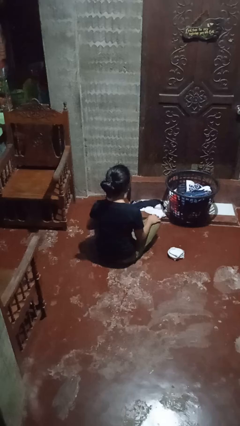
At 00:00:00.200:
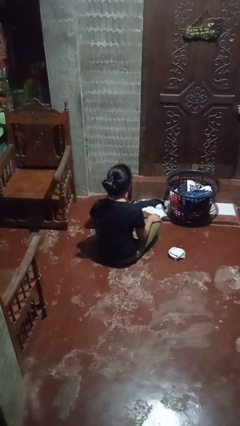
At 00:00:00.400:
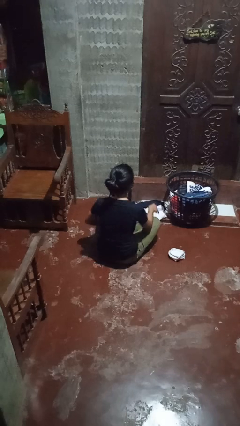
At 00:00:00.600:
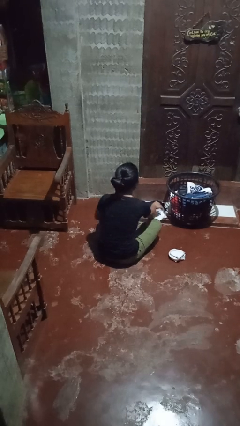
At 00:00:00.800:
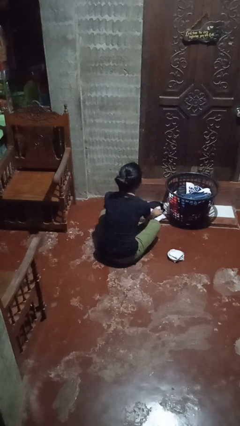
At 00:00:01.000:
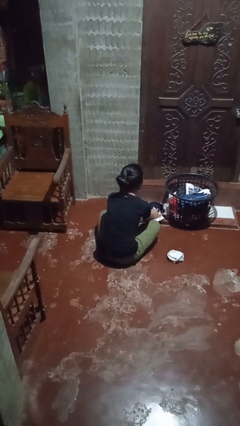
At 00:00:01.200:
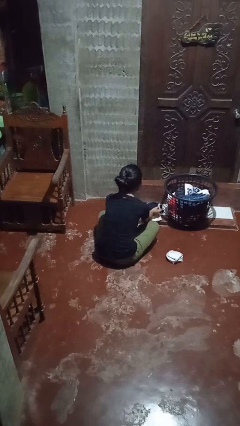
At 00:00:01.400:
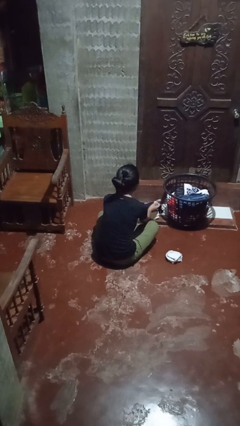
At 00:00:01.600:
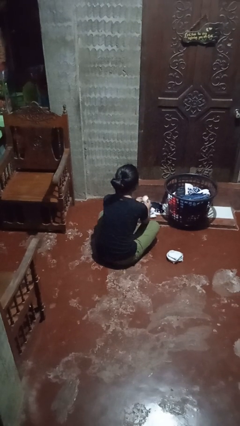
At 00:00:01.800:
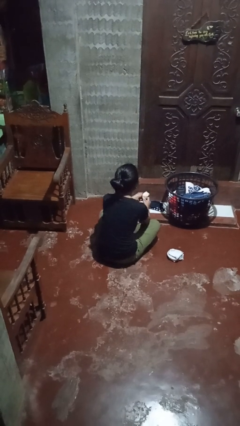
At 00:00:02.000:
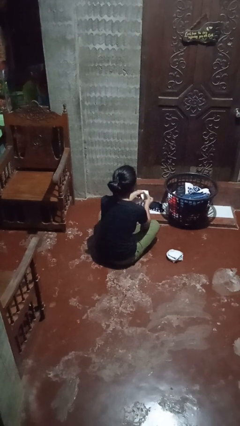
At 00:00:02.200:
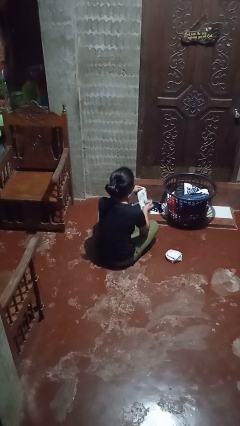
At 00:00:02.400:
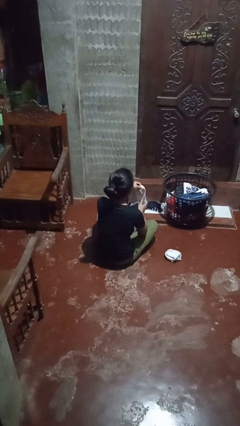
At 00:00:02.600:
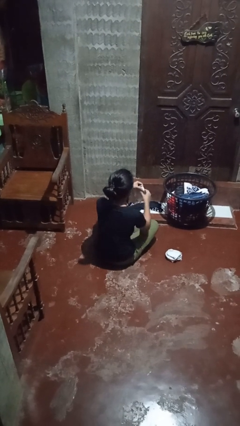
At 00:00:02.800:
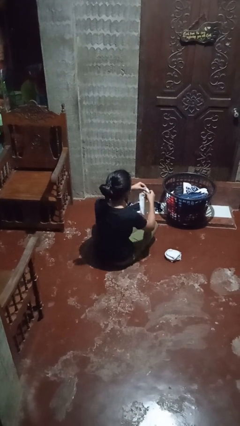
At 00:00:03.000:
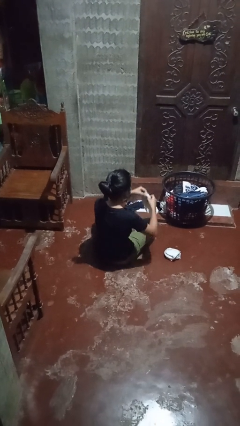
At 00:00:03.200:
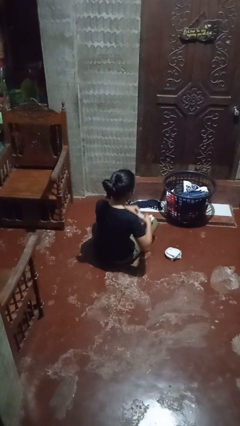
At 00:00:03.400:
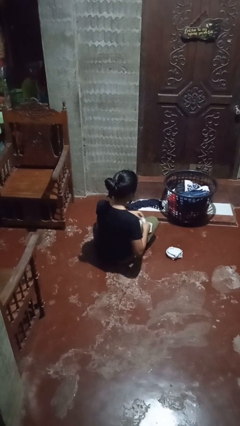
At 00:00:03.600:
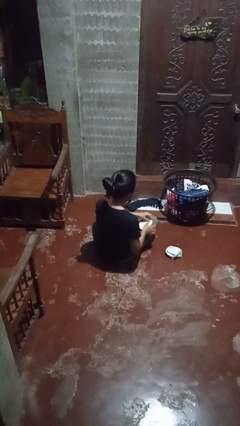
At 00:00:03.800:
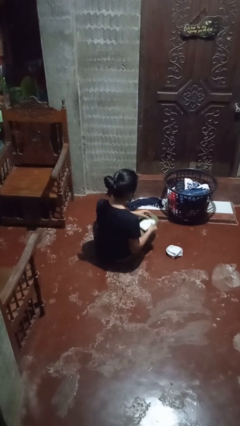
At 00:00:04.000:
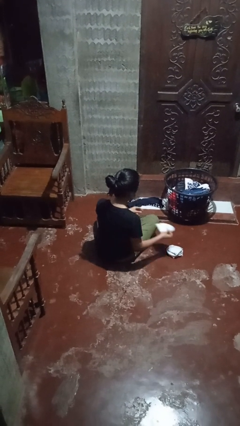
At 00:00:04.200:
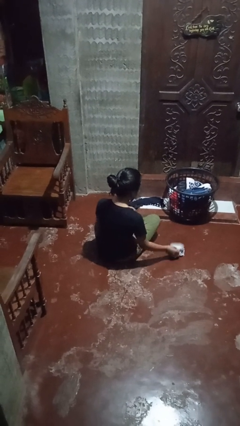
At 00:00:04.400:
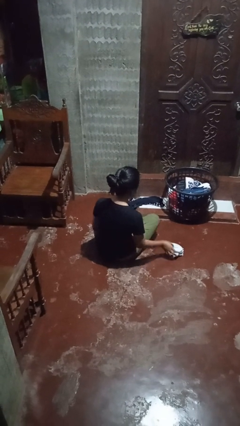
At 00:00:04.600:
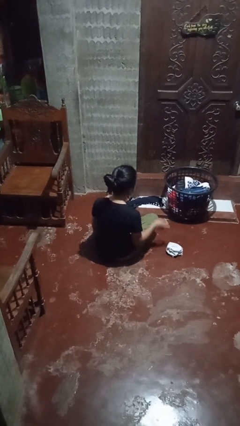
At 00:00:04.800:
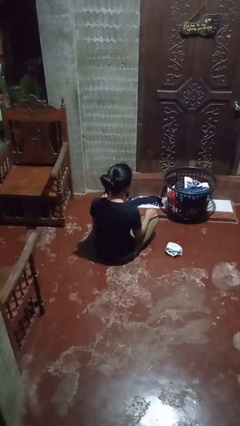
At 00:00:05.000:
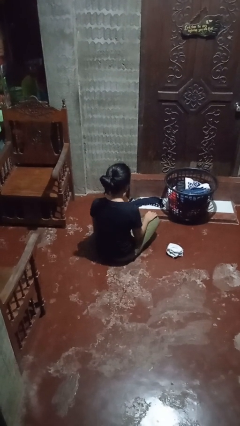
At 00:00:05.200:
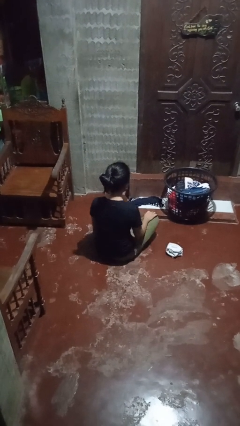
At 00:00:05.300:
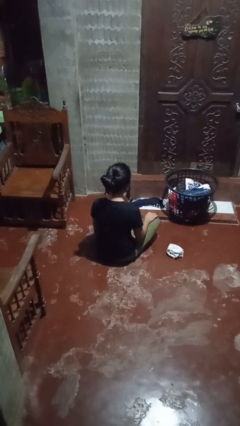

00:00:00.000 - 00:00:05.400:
person folds socks

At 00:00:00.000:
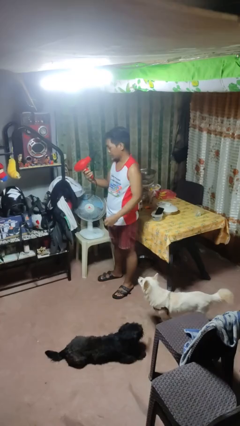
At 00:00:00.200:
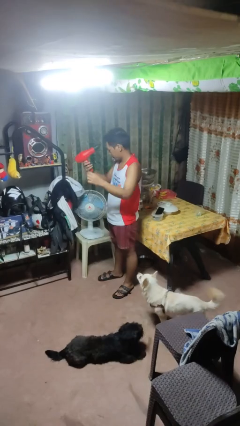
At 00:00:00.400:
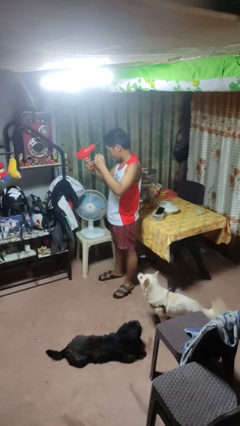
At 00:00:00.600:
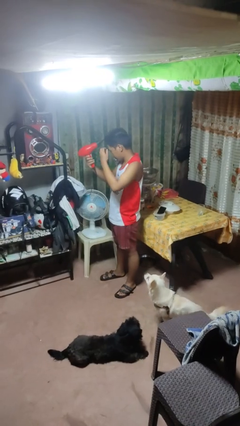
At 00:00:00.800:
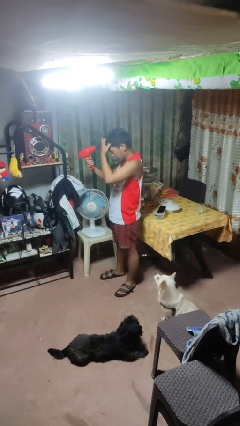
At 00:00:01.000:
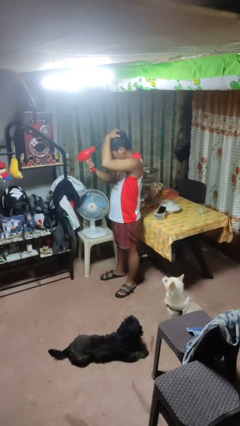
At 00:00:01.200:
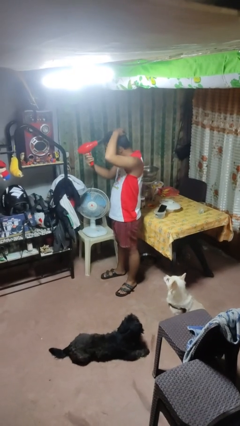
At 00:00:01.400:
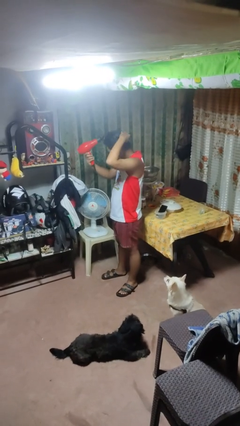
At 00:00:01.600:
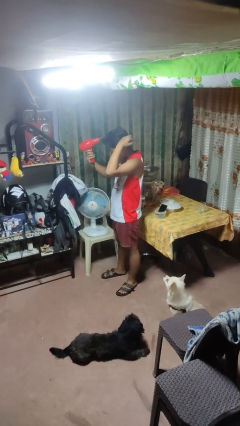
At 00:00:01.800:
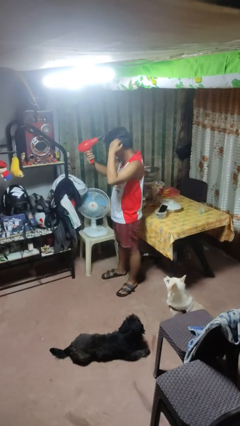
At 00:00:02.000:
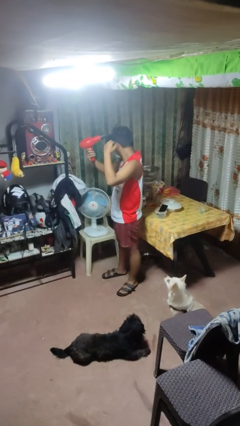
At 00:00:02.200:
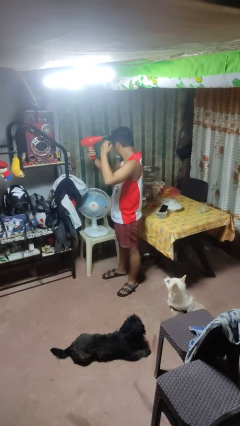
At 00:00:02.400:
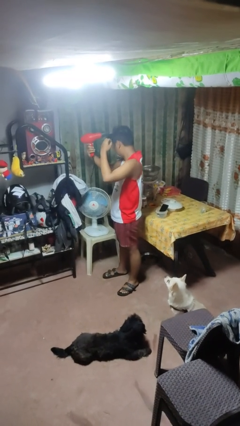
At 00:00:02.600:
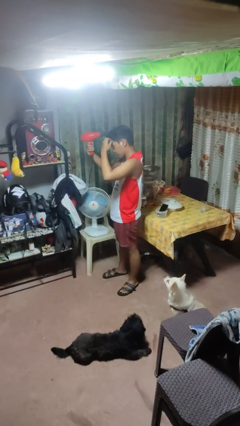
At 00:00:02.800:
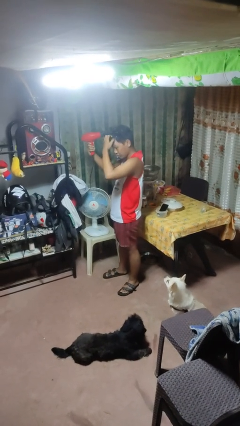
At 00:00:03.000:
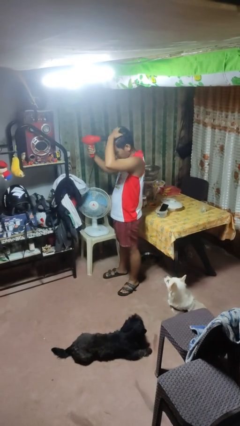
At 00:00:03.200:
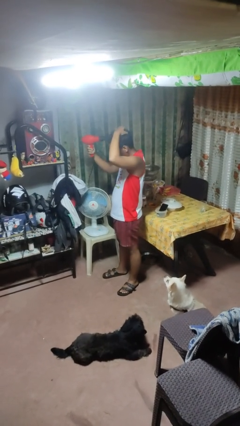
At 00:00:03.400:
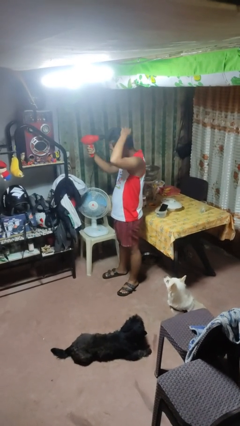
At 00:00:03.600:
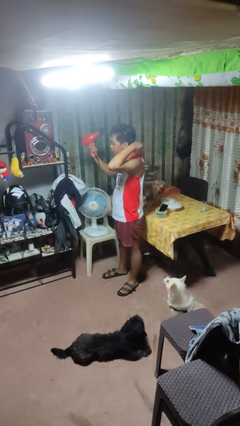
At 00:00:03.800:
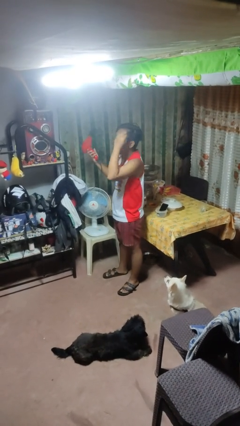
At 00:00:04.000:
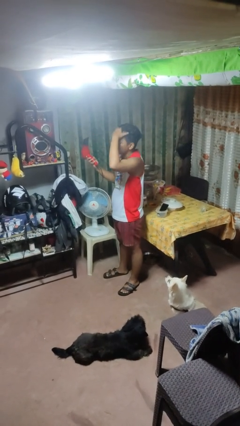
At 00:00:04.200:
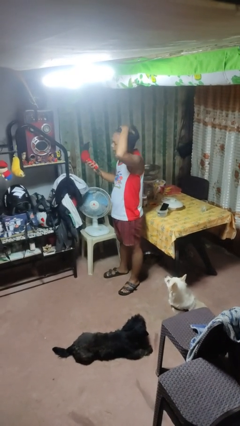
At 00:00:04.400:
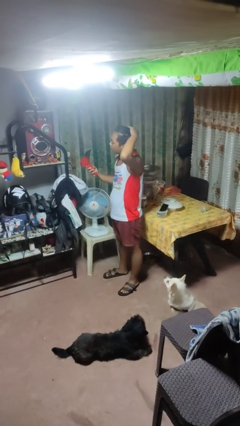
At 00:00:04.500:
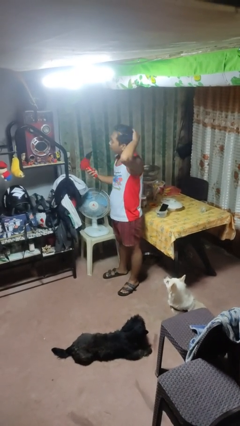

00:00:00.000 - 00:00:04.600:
person dries hair with hairdryer

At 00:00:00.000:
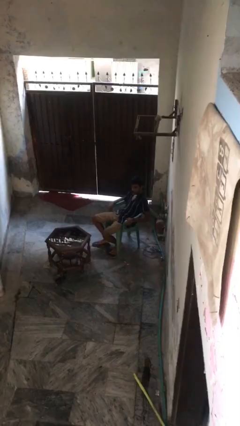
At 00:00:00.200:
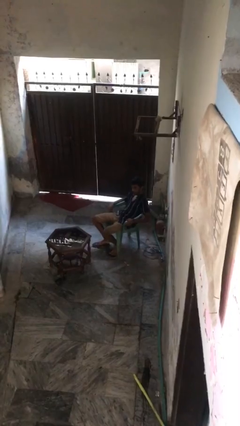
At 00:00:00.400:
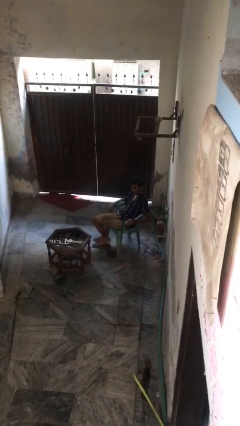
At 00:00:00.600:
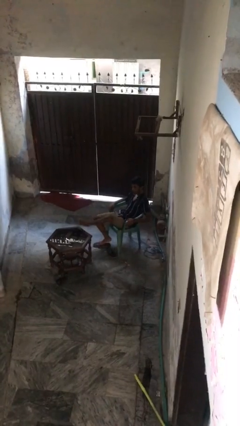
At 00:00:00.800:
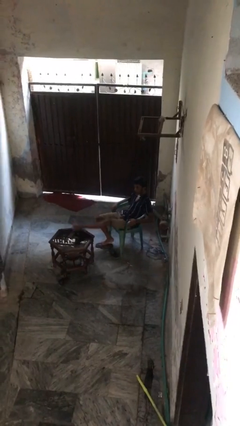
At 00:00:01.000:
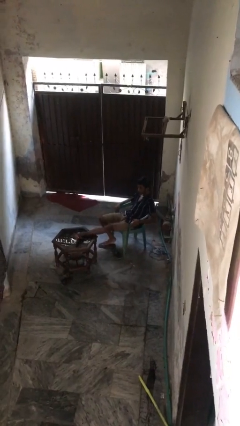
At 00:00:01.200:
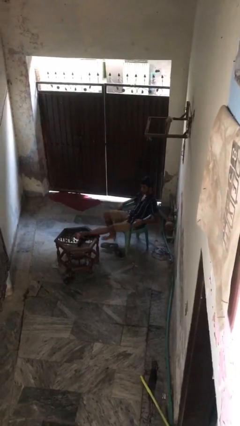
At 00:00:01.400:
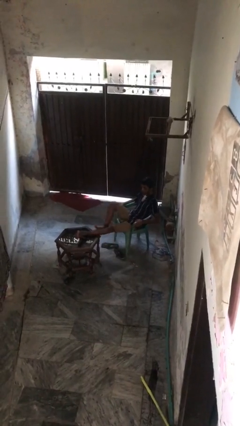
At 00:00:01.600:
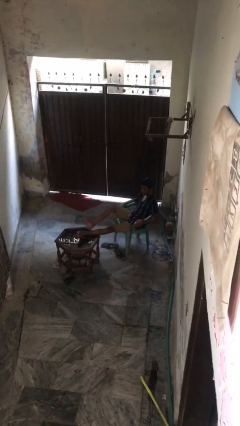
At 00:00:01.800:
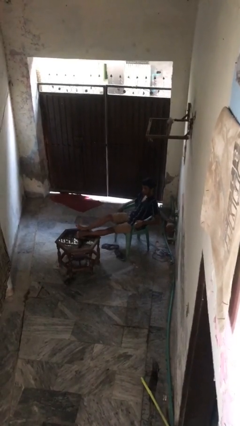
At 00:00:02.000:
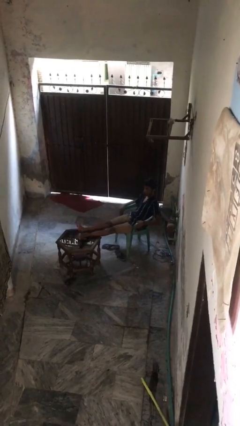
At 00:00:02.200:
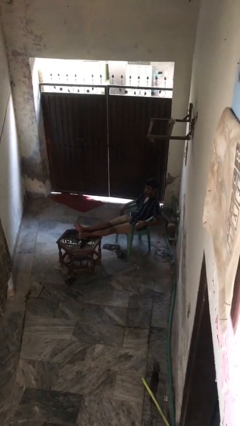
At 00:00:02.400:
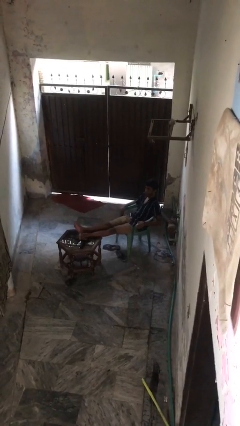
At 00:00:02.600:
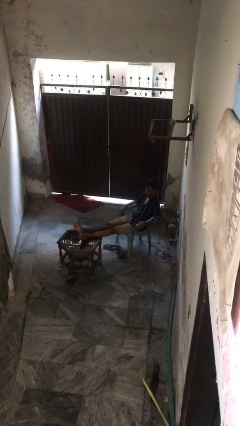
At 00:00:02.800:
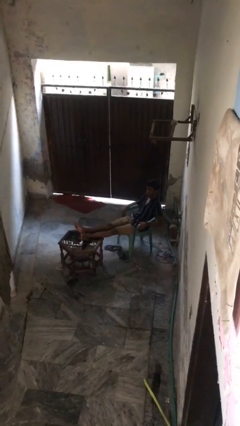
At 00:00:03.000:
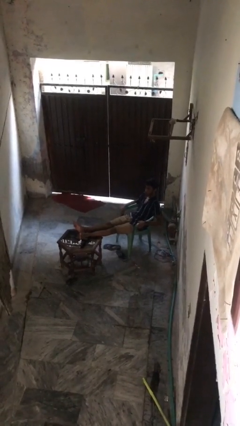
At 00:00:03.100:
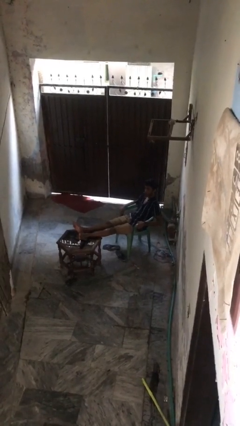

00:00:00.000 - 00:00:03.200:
person puts feet up

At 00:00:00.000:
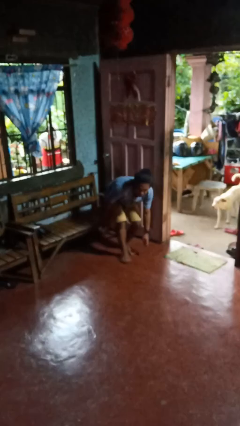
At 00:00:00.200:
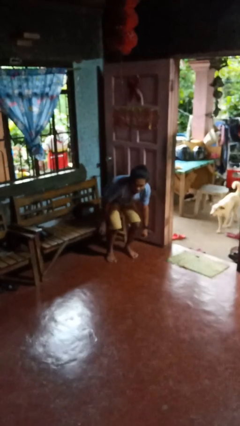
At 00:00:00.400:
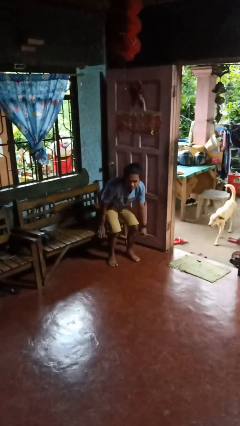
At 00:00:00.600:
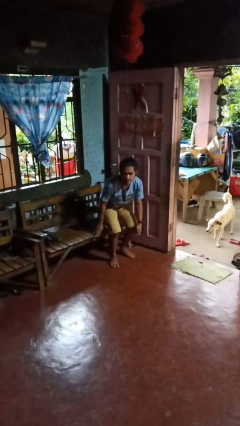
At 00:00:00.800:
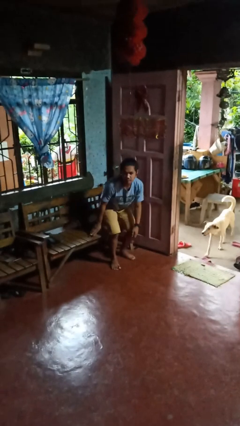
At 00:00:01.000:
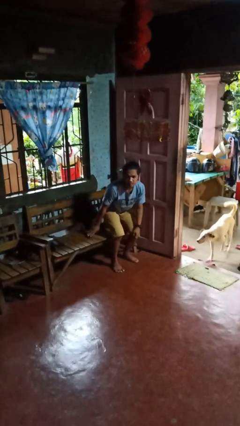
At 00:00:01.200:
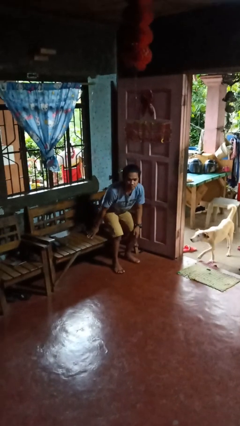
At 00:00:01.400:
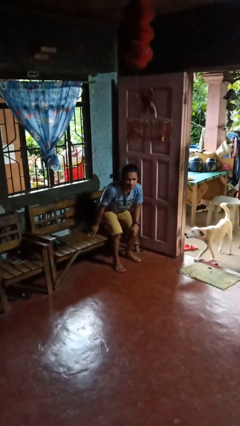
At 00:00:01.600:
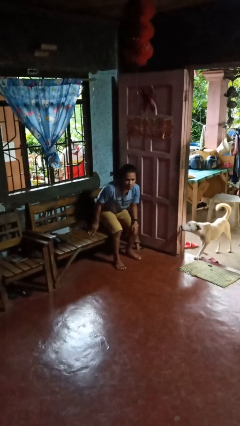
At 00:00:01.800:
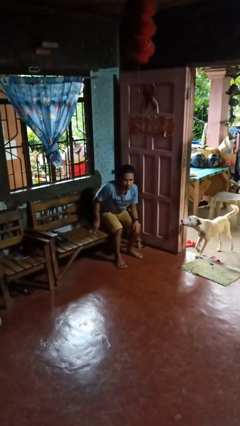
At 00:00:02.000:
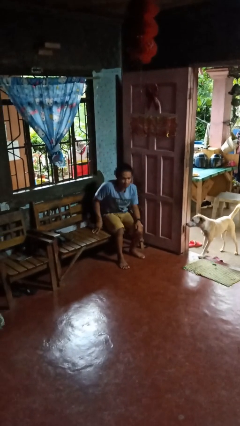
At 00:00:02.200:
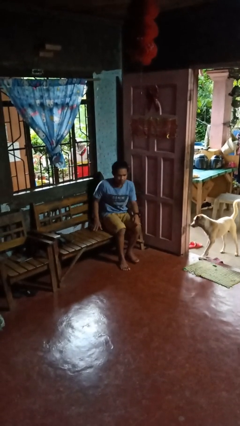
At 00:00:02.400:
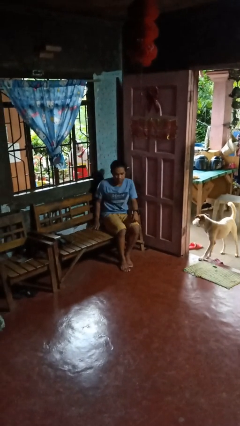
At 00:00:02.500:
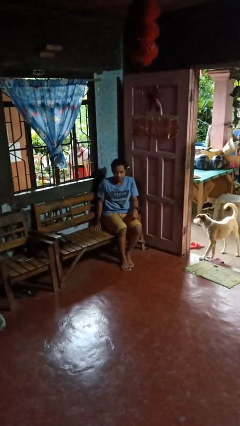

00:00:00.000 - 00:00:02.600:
person stands up from floor

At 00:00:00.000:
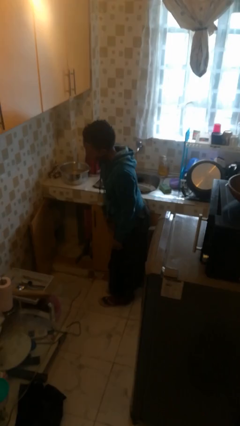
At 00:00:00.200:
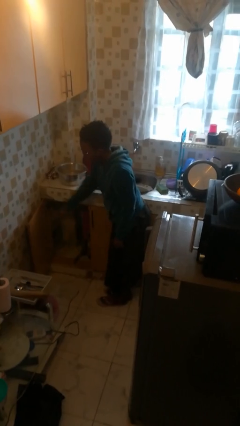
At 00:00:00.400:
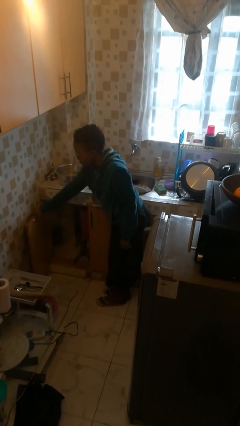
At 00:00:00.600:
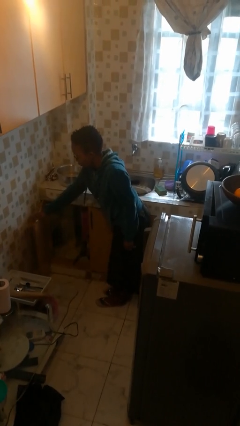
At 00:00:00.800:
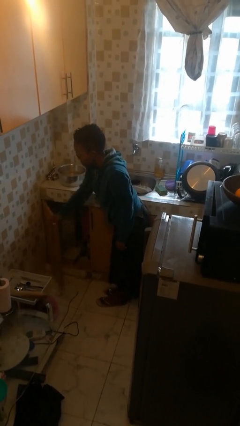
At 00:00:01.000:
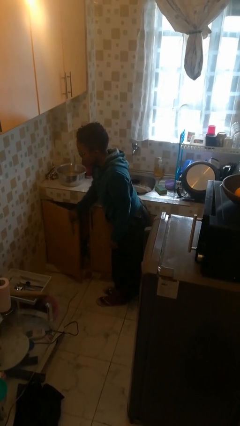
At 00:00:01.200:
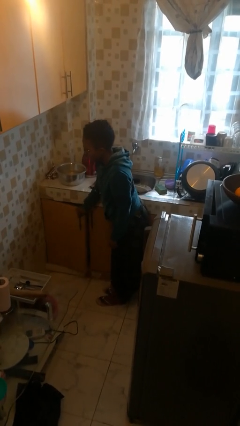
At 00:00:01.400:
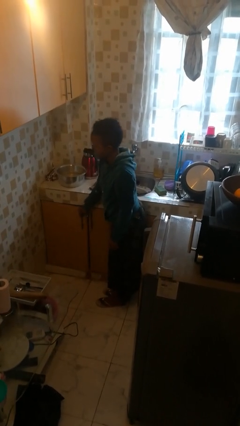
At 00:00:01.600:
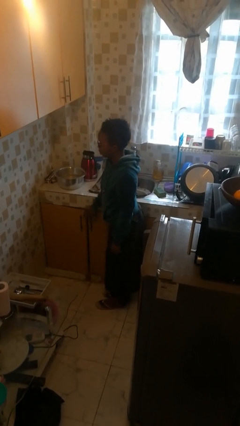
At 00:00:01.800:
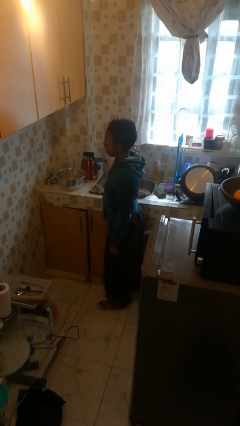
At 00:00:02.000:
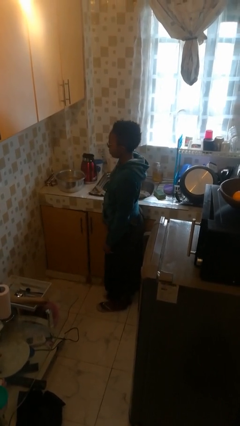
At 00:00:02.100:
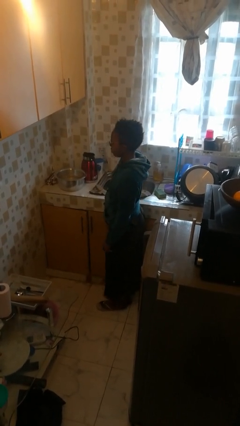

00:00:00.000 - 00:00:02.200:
person closes cabinet
